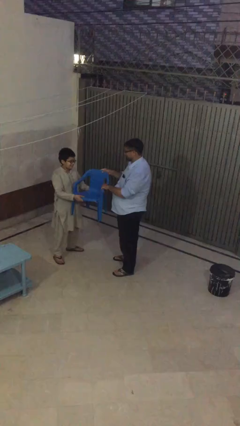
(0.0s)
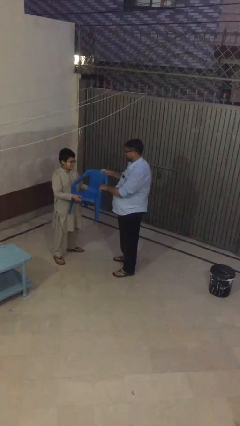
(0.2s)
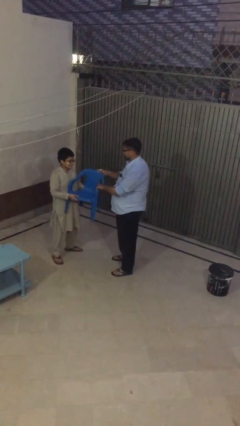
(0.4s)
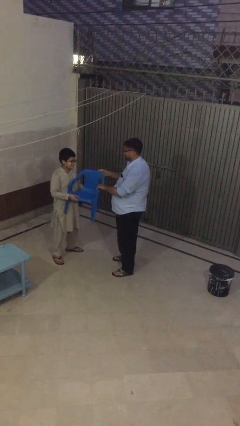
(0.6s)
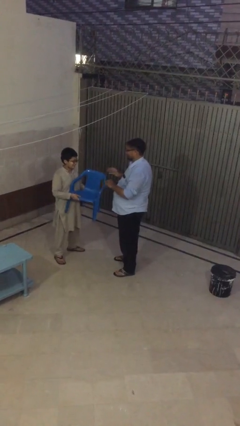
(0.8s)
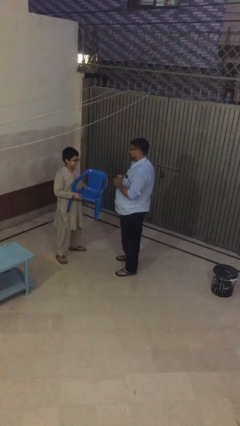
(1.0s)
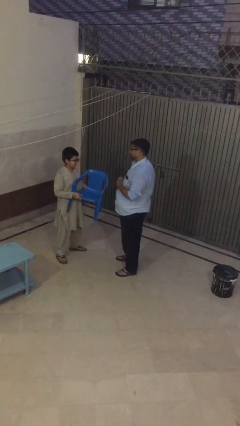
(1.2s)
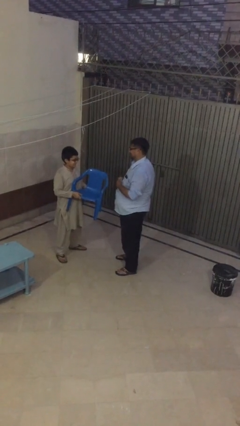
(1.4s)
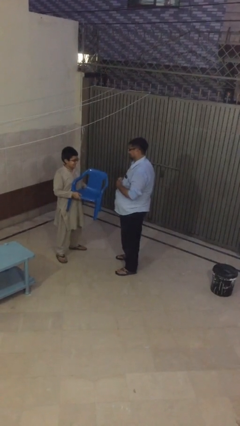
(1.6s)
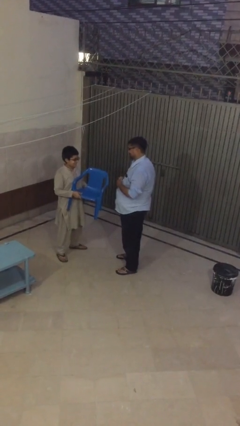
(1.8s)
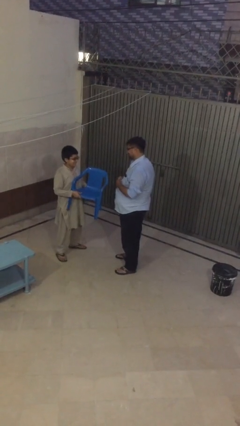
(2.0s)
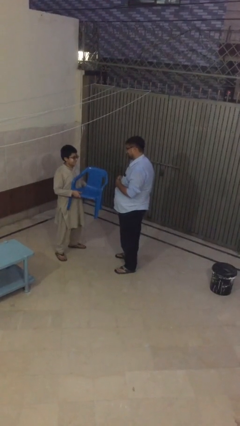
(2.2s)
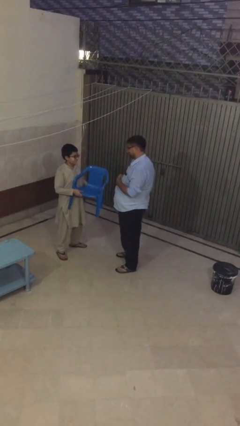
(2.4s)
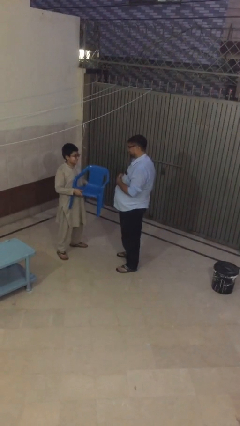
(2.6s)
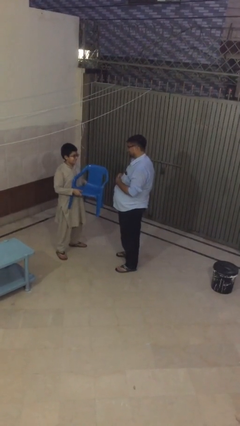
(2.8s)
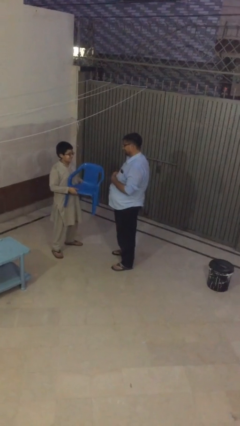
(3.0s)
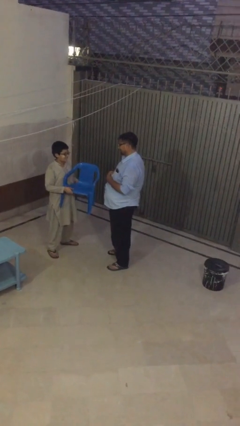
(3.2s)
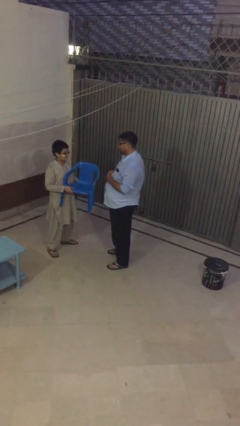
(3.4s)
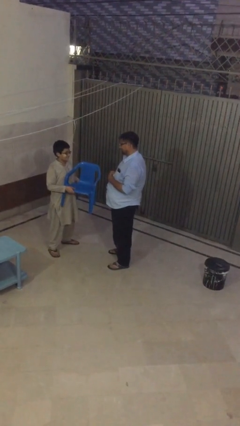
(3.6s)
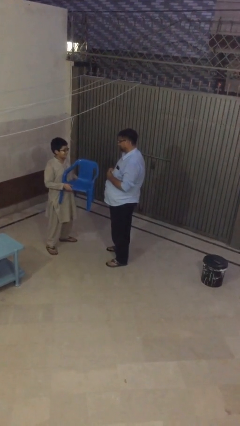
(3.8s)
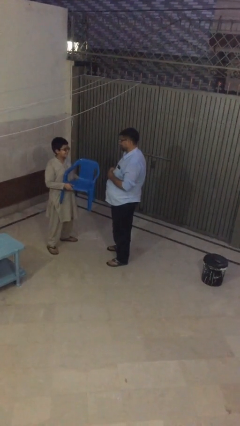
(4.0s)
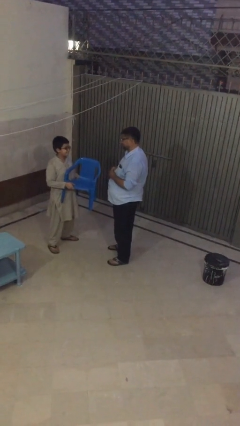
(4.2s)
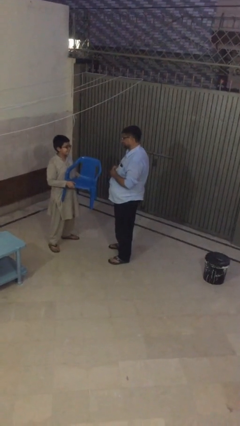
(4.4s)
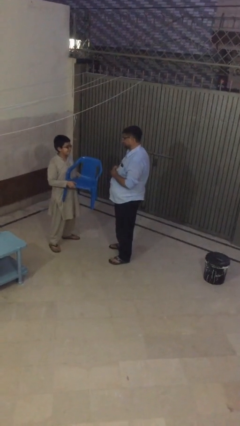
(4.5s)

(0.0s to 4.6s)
person transfers object to person

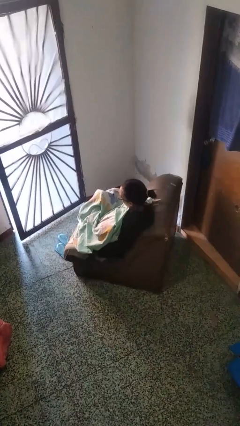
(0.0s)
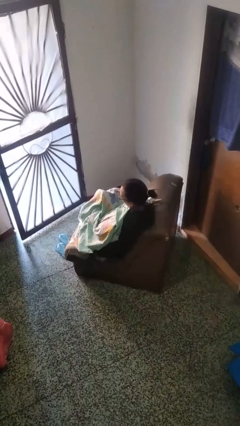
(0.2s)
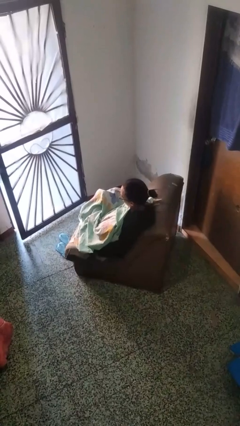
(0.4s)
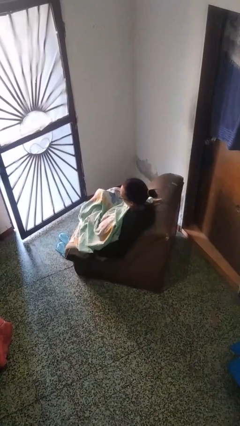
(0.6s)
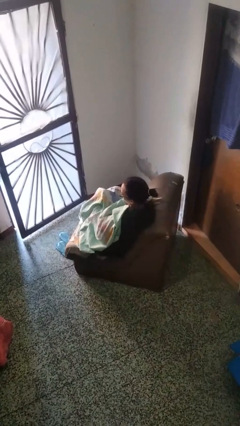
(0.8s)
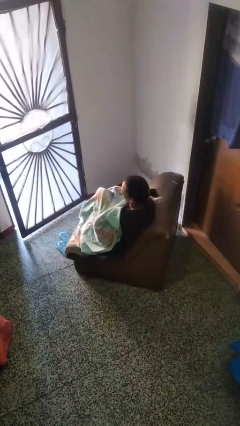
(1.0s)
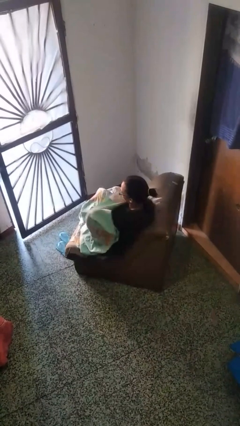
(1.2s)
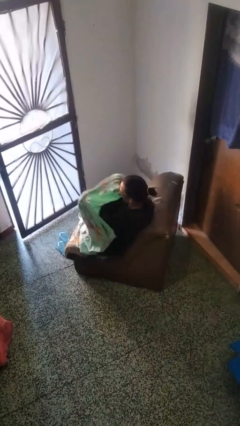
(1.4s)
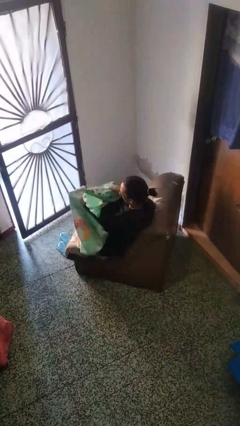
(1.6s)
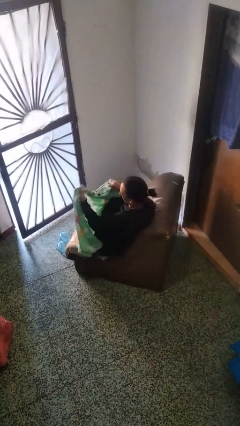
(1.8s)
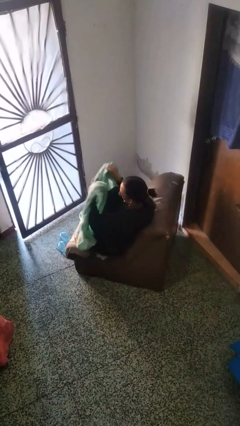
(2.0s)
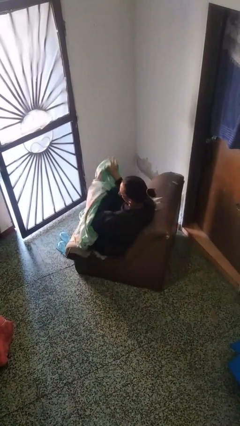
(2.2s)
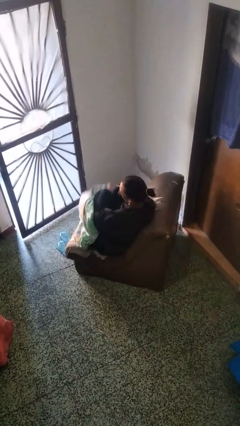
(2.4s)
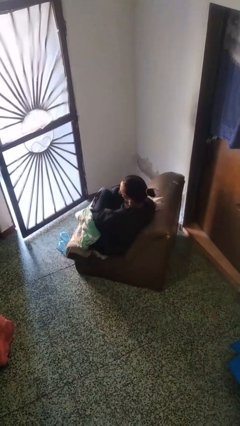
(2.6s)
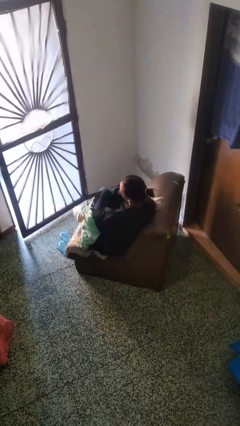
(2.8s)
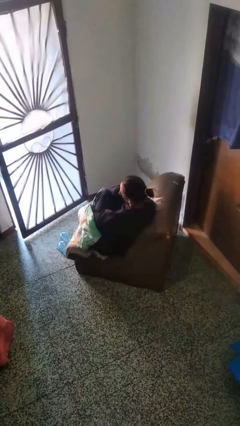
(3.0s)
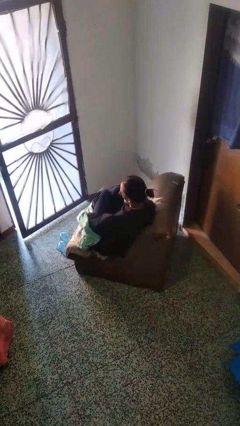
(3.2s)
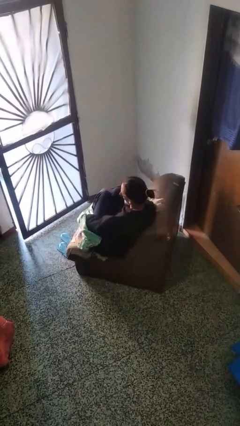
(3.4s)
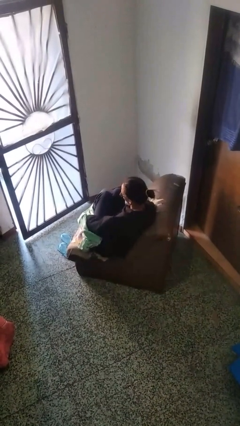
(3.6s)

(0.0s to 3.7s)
person uncovers with blanket

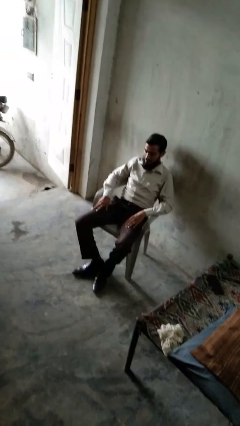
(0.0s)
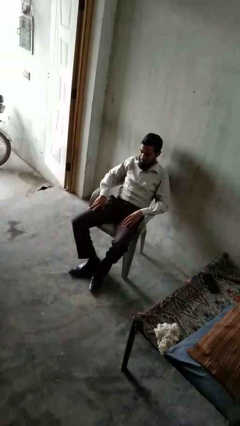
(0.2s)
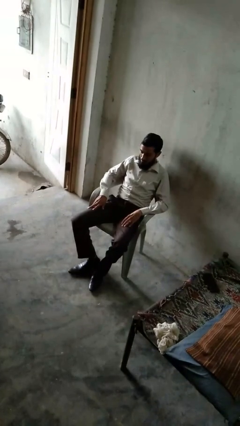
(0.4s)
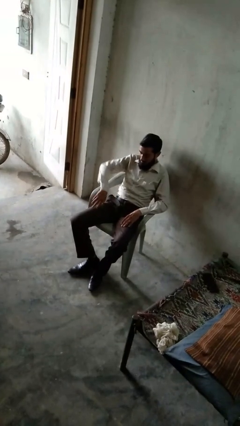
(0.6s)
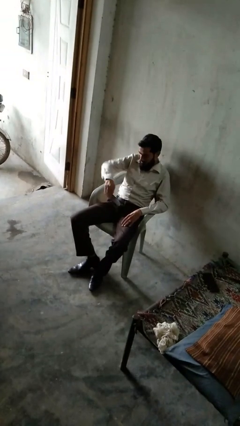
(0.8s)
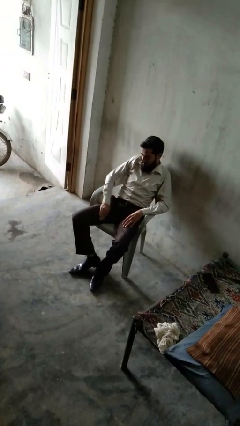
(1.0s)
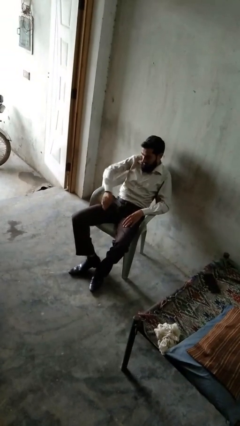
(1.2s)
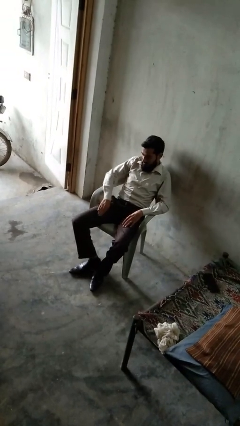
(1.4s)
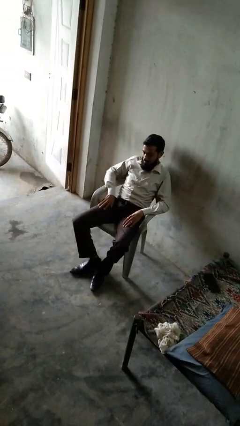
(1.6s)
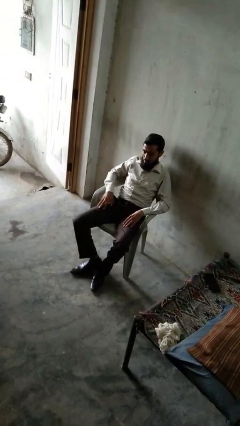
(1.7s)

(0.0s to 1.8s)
person slaps hands on thighs

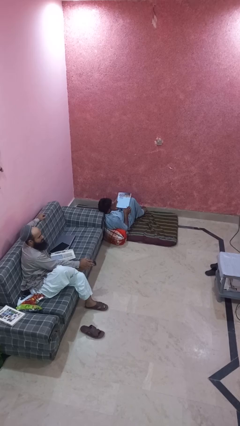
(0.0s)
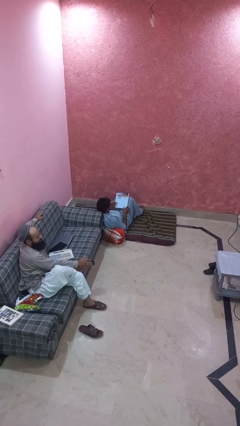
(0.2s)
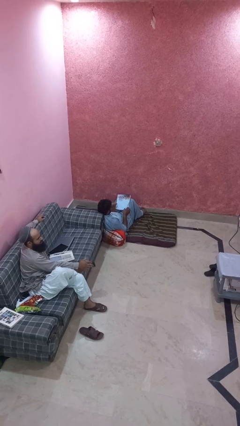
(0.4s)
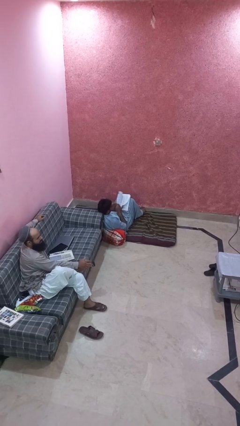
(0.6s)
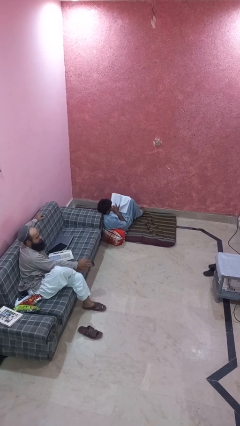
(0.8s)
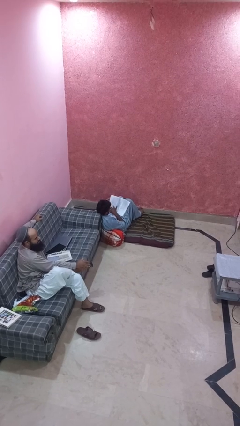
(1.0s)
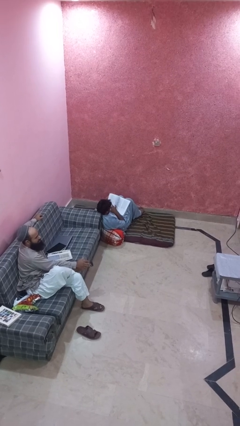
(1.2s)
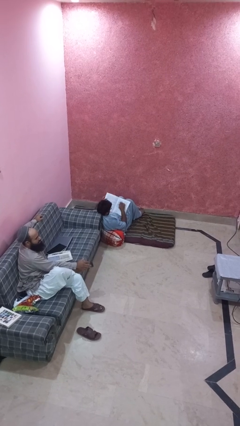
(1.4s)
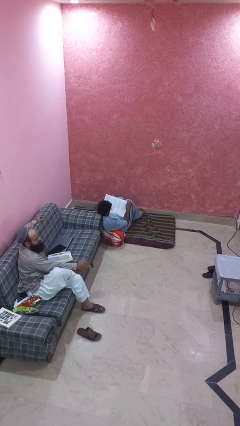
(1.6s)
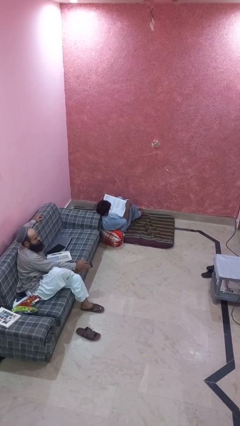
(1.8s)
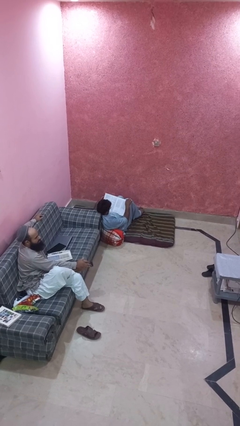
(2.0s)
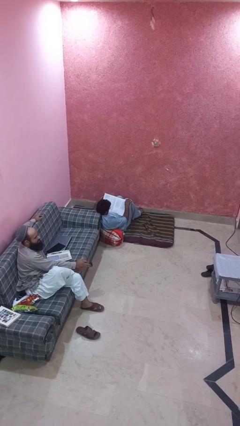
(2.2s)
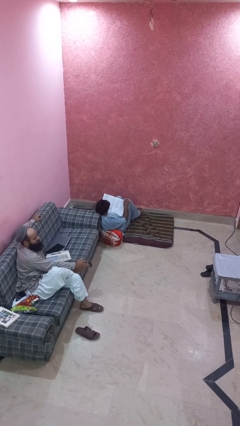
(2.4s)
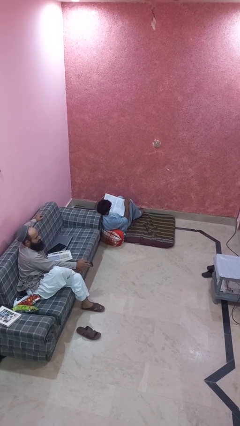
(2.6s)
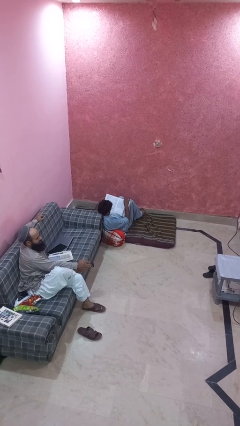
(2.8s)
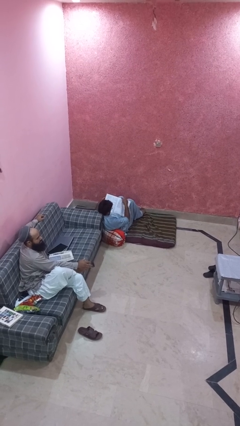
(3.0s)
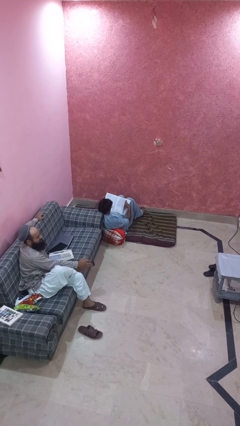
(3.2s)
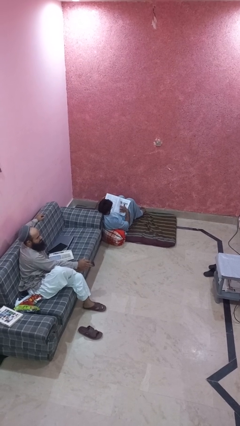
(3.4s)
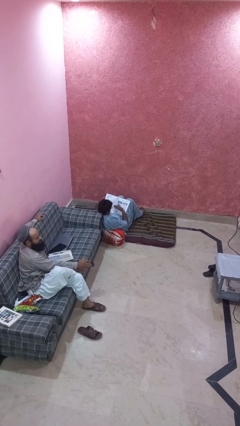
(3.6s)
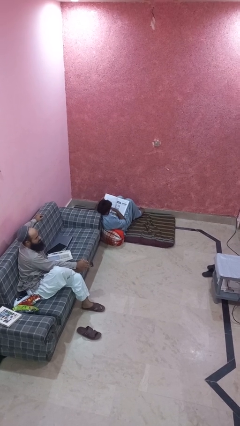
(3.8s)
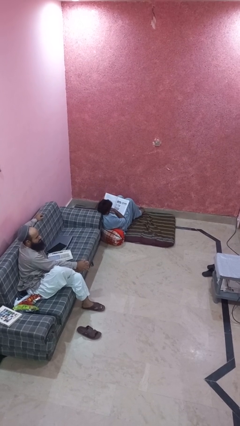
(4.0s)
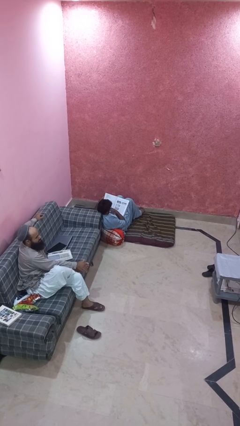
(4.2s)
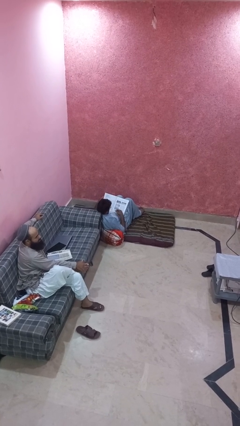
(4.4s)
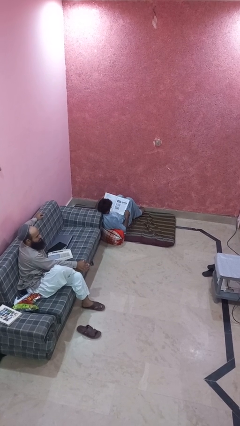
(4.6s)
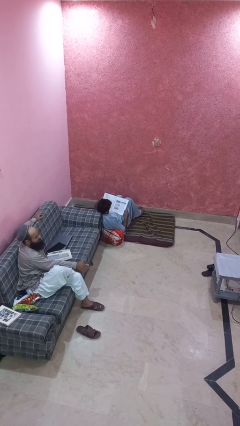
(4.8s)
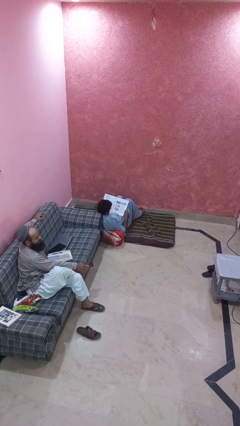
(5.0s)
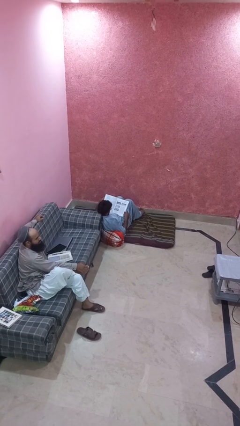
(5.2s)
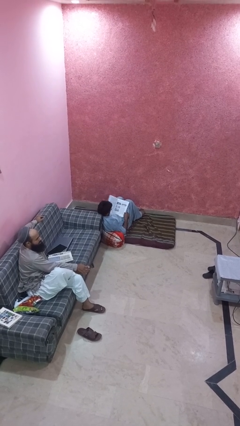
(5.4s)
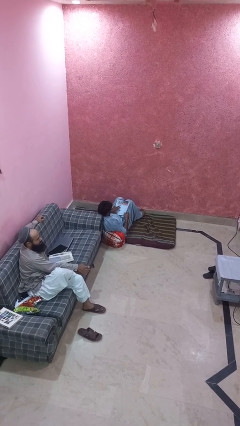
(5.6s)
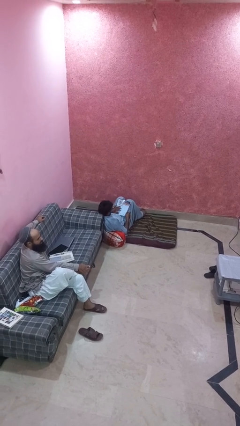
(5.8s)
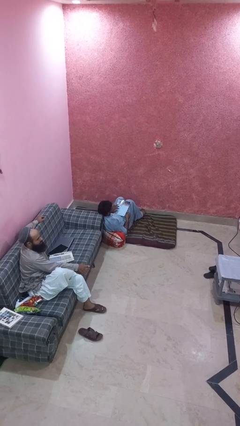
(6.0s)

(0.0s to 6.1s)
person reads magazine

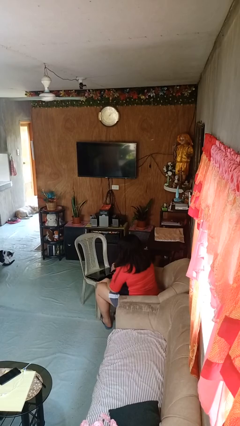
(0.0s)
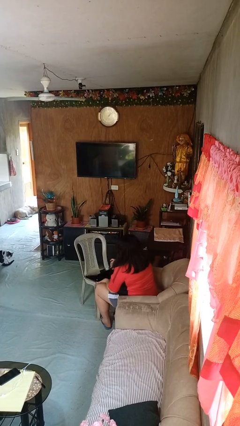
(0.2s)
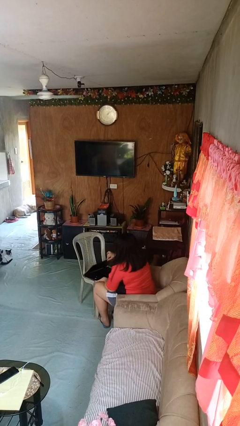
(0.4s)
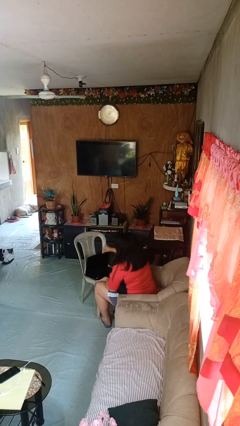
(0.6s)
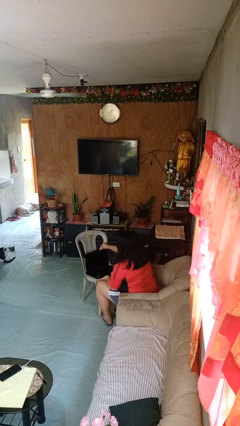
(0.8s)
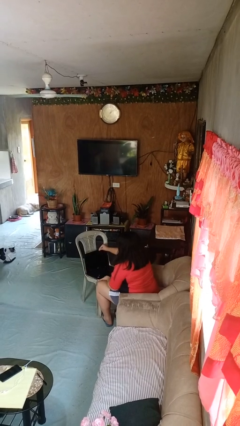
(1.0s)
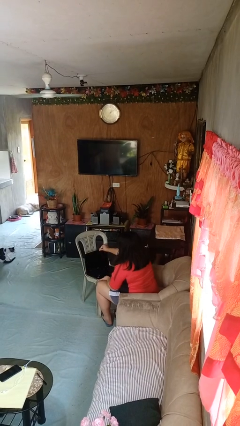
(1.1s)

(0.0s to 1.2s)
person opens laptop

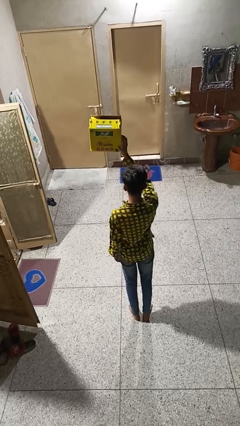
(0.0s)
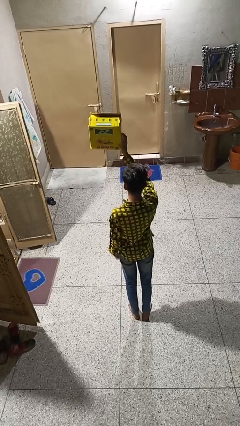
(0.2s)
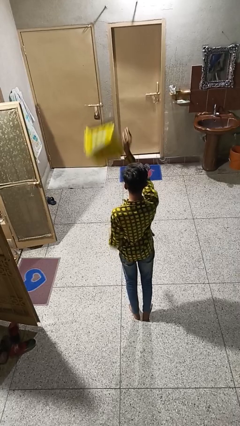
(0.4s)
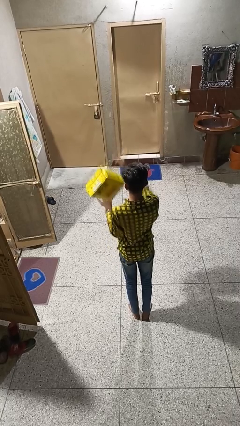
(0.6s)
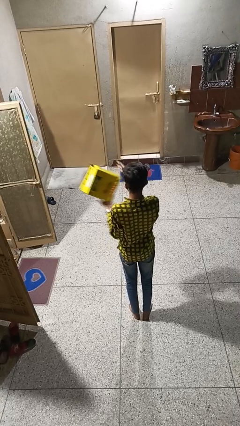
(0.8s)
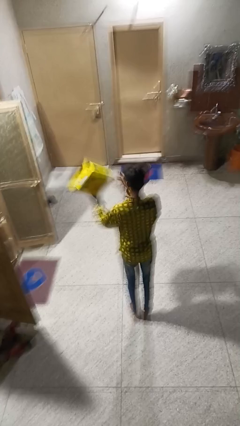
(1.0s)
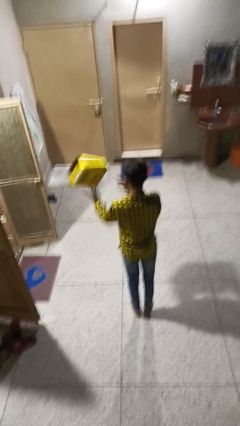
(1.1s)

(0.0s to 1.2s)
person drops object
